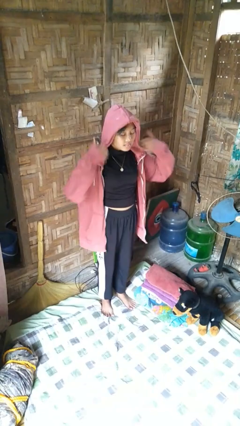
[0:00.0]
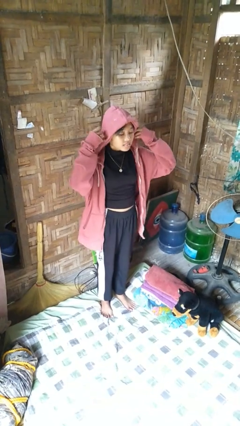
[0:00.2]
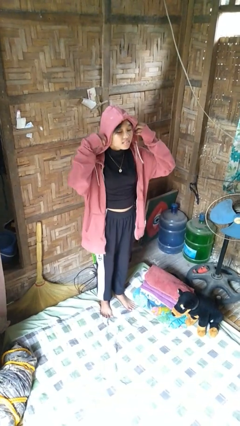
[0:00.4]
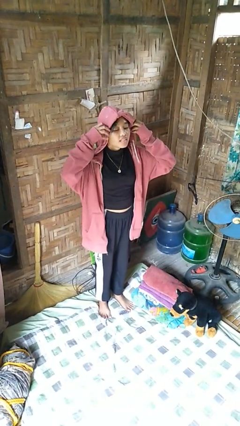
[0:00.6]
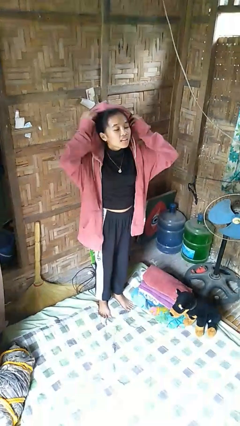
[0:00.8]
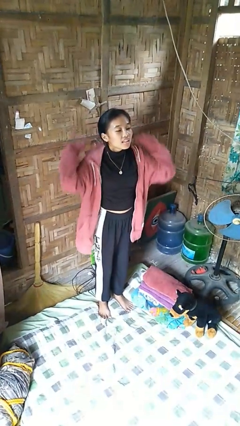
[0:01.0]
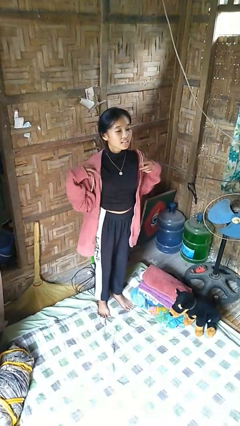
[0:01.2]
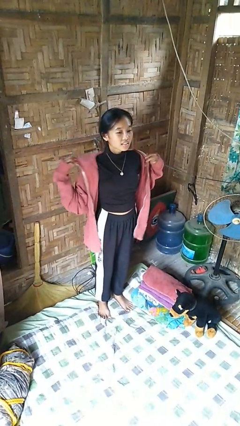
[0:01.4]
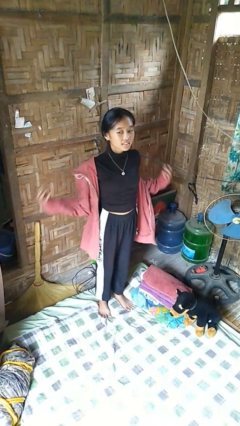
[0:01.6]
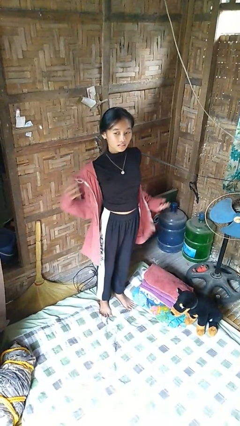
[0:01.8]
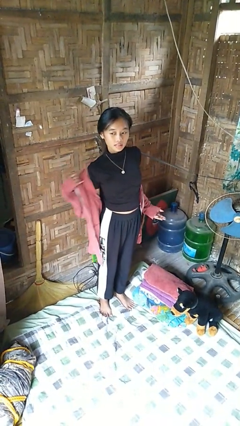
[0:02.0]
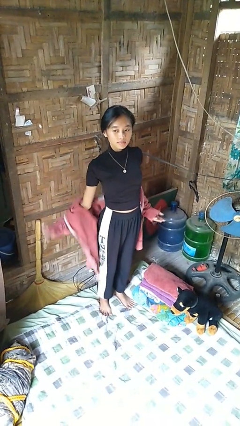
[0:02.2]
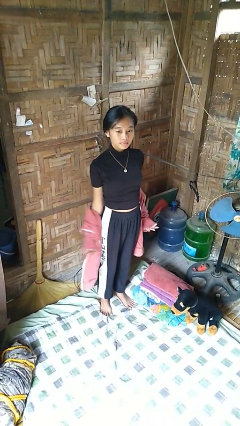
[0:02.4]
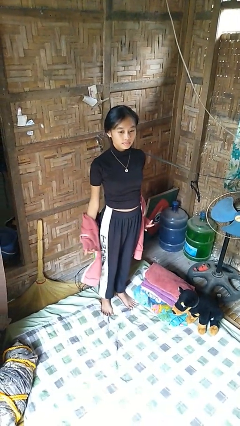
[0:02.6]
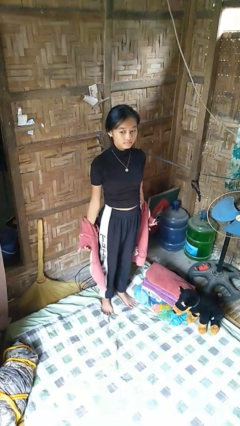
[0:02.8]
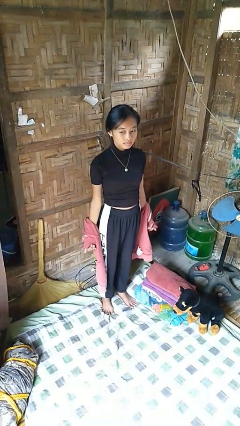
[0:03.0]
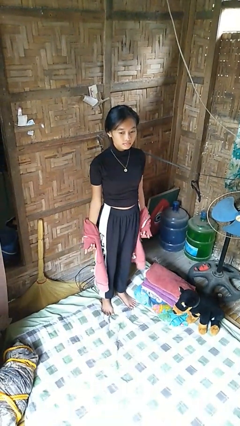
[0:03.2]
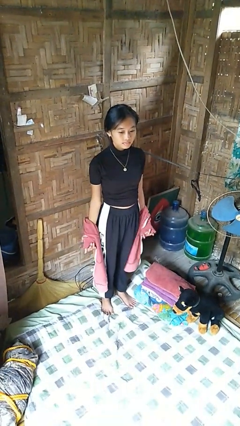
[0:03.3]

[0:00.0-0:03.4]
person takes off hoodie

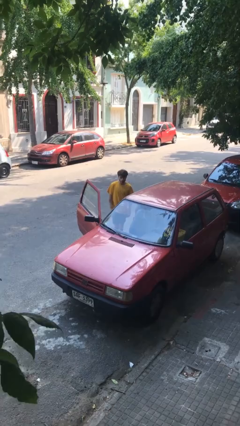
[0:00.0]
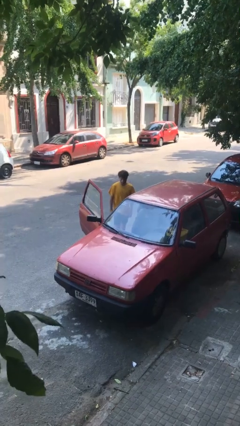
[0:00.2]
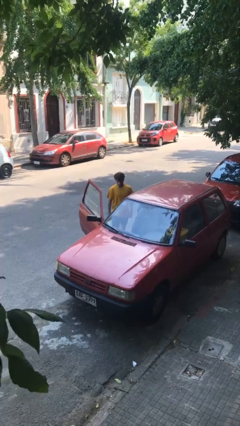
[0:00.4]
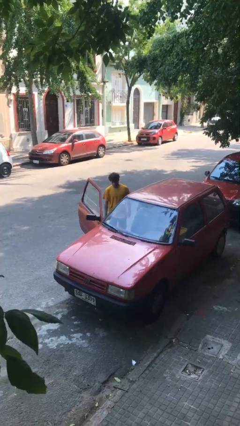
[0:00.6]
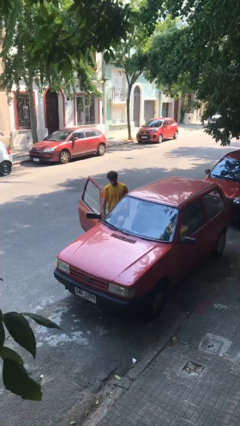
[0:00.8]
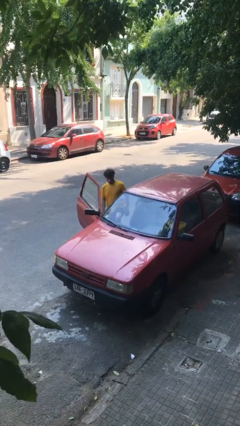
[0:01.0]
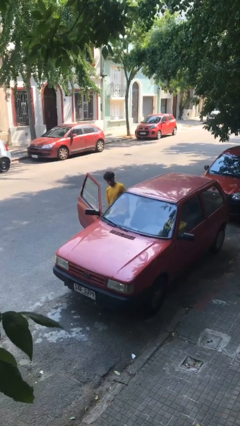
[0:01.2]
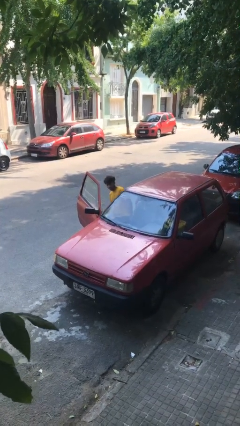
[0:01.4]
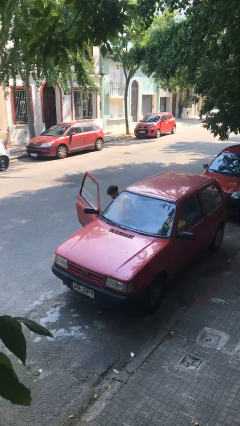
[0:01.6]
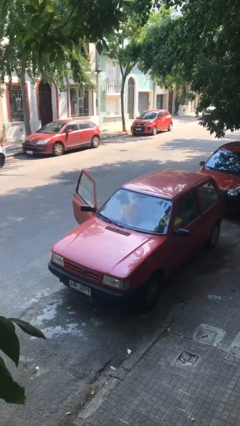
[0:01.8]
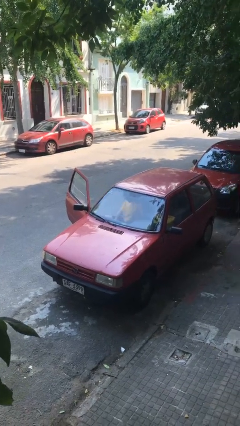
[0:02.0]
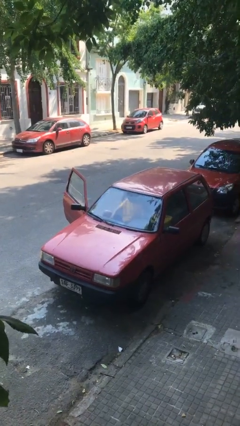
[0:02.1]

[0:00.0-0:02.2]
person enters car

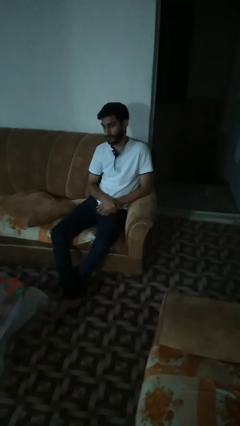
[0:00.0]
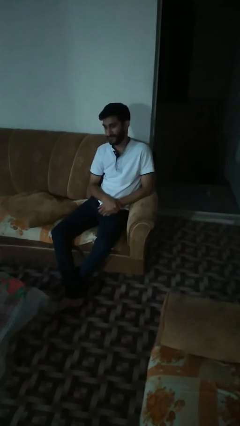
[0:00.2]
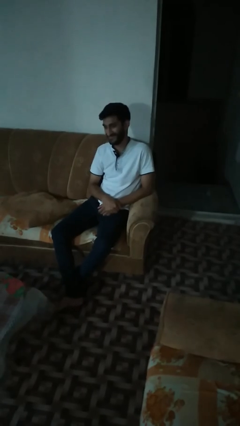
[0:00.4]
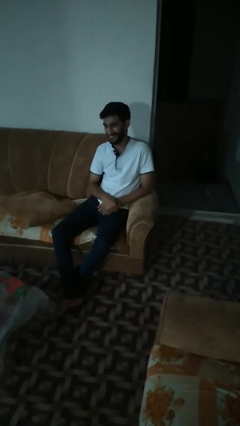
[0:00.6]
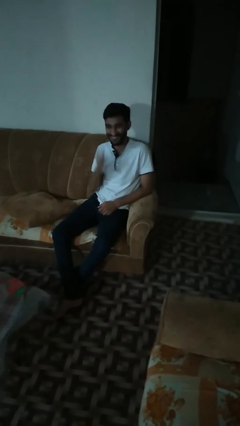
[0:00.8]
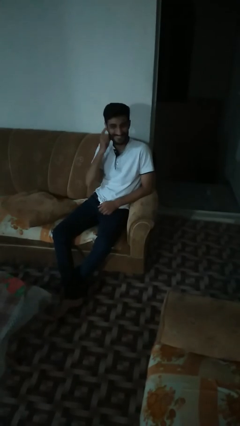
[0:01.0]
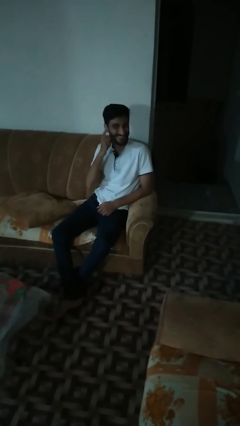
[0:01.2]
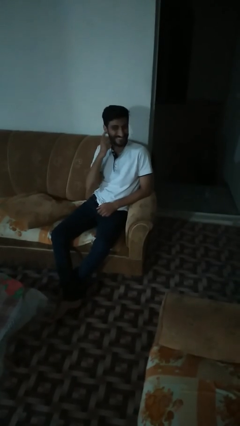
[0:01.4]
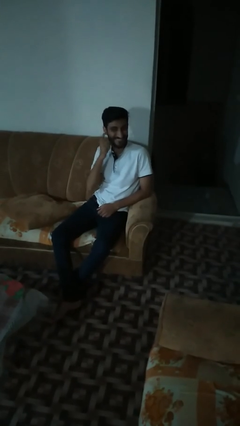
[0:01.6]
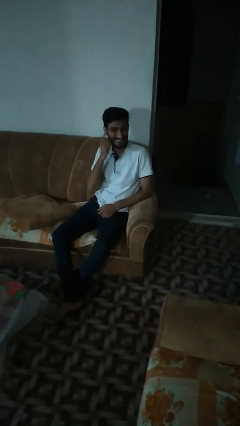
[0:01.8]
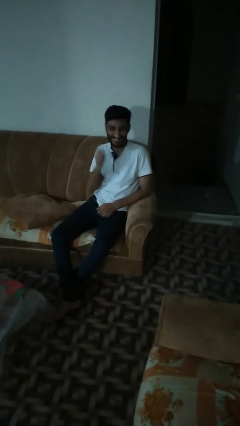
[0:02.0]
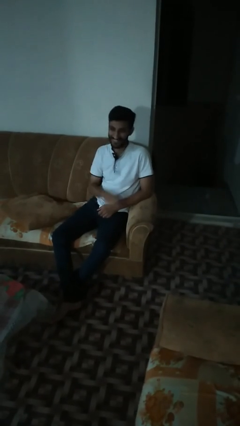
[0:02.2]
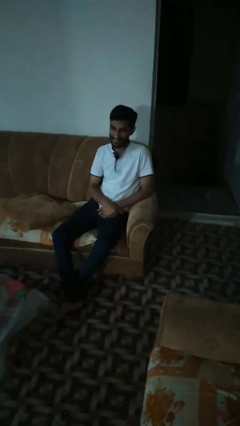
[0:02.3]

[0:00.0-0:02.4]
person gestures listen closely

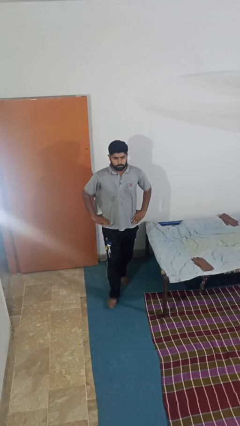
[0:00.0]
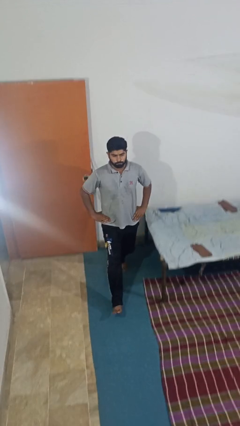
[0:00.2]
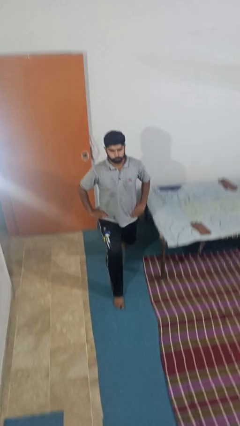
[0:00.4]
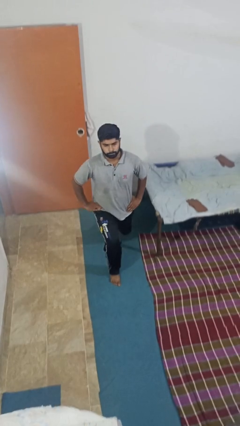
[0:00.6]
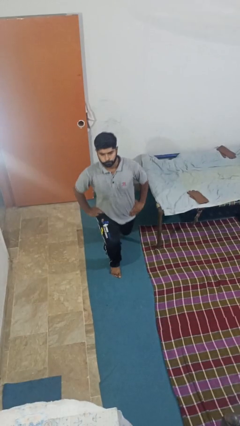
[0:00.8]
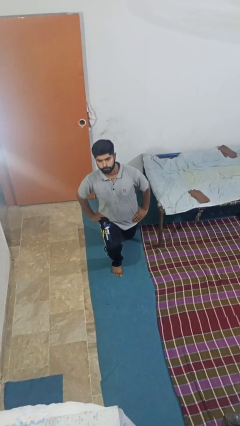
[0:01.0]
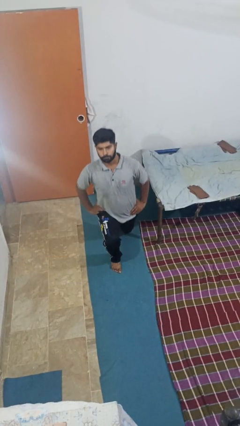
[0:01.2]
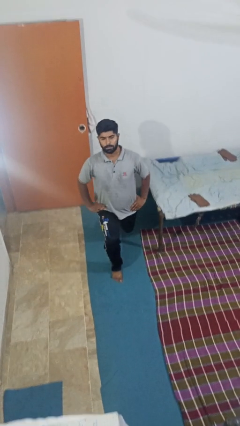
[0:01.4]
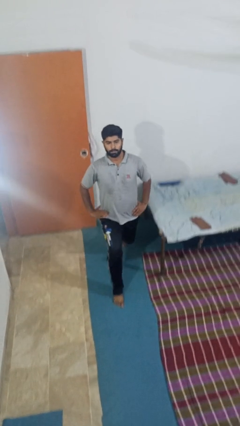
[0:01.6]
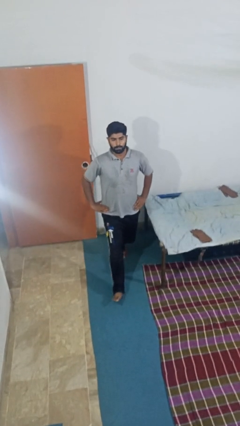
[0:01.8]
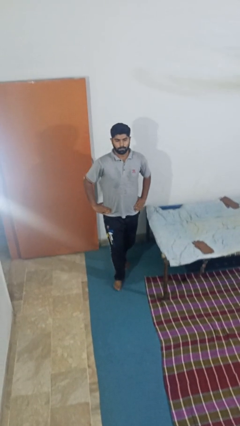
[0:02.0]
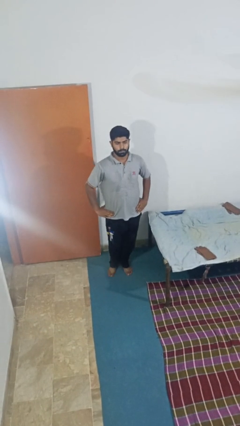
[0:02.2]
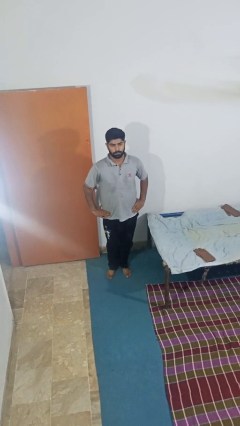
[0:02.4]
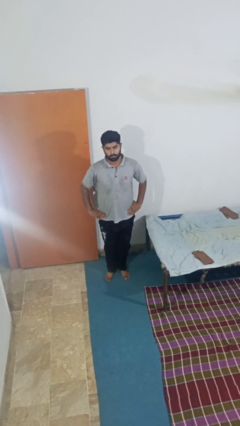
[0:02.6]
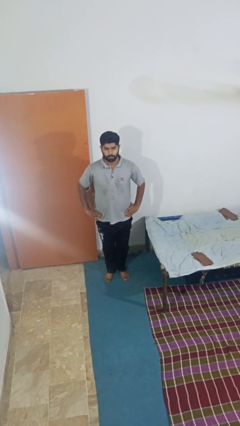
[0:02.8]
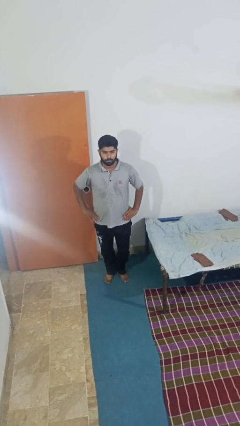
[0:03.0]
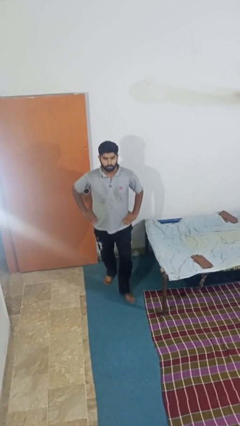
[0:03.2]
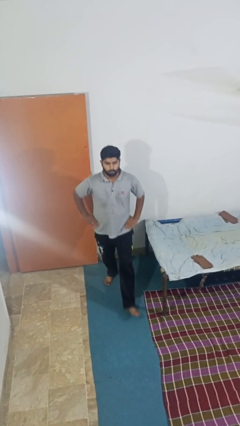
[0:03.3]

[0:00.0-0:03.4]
person exercises with lunges

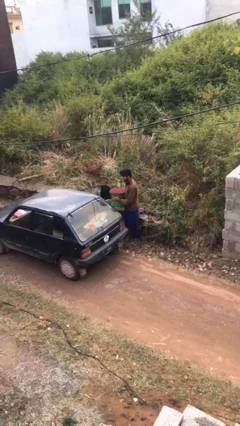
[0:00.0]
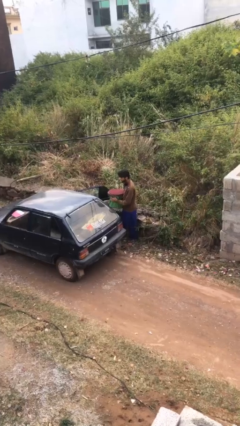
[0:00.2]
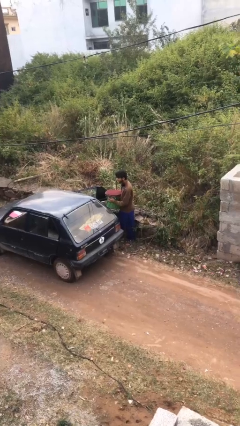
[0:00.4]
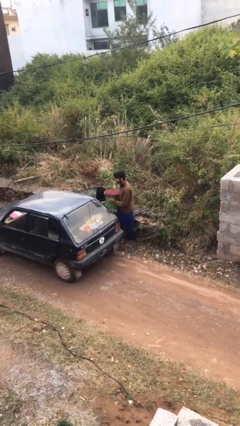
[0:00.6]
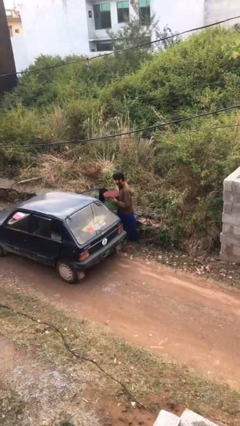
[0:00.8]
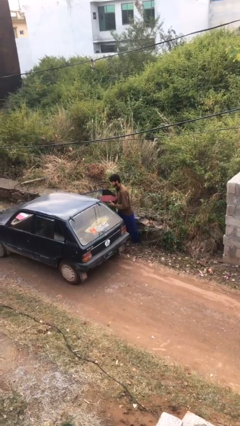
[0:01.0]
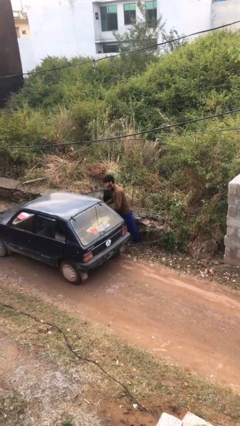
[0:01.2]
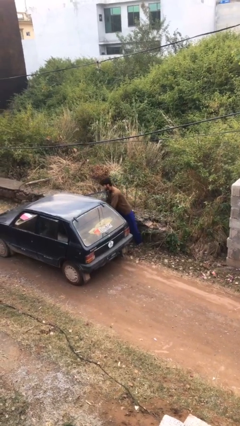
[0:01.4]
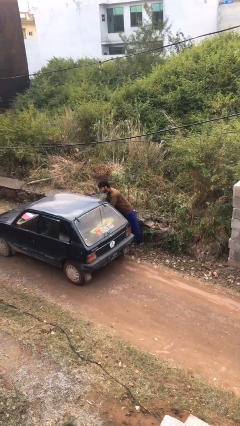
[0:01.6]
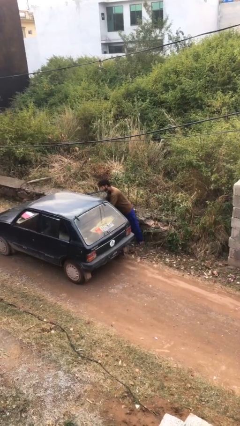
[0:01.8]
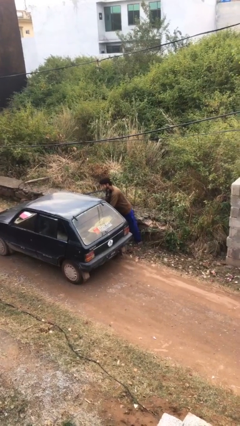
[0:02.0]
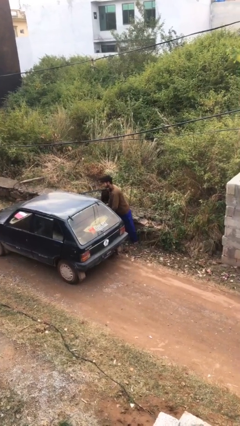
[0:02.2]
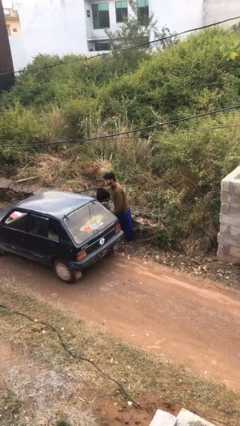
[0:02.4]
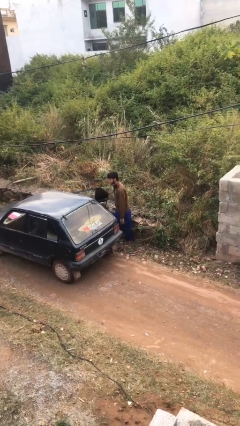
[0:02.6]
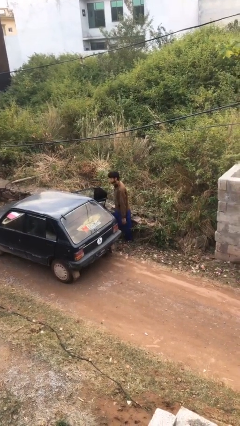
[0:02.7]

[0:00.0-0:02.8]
person loads car

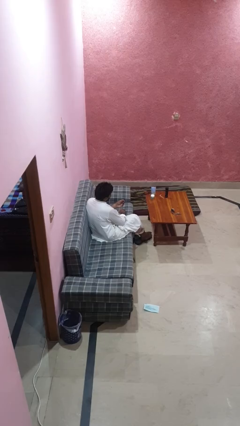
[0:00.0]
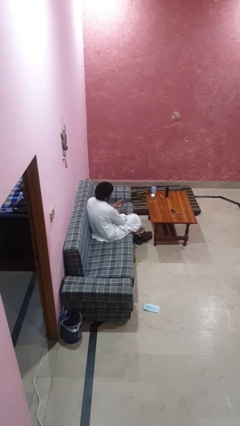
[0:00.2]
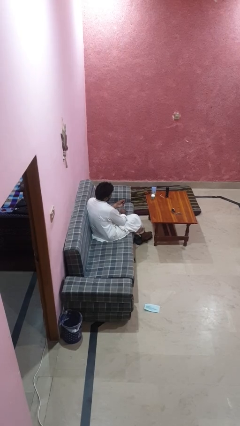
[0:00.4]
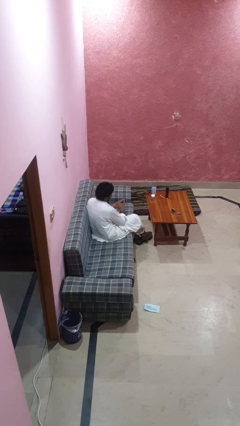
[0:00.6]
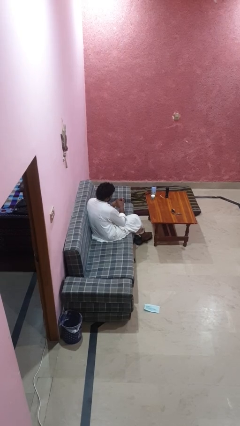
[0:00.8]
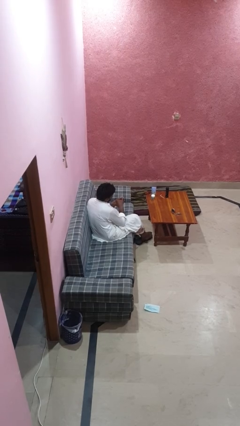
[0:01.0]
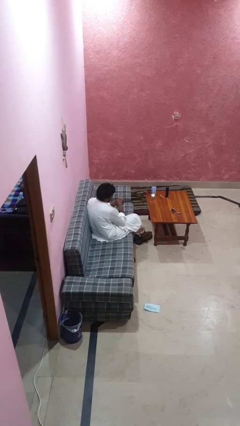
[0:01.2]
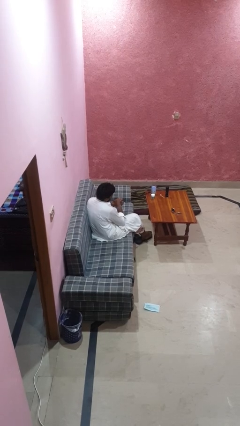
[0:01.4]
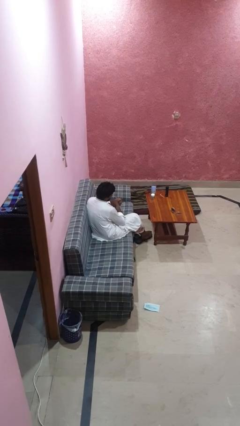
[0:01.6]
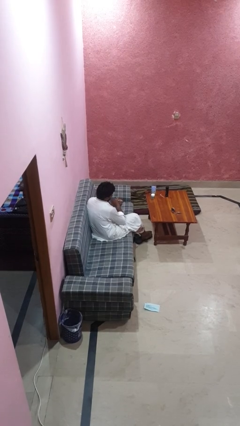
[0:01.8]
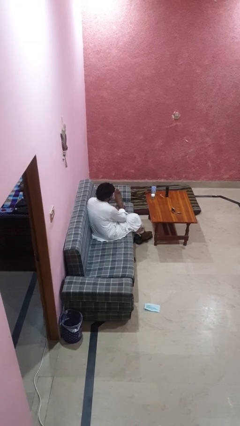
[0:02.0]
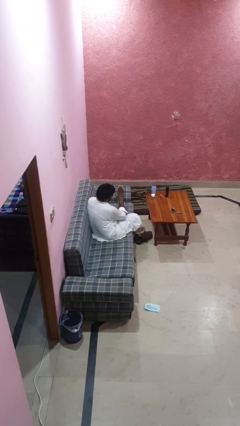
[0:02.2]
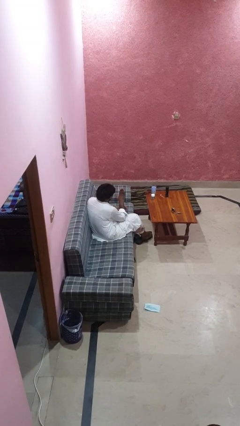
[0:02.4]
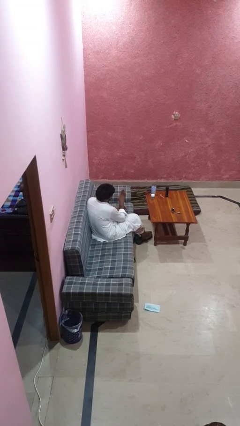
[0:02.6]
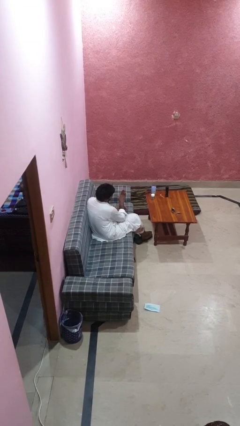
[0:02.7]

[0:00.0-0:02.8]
person puts on ring

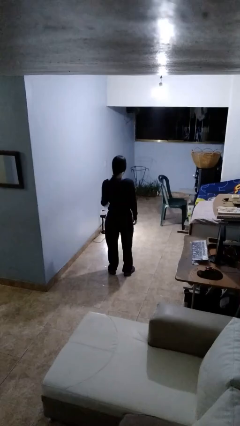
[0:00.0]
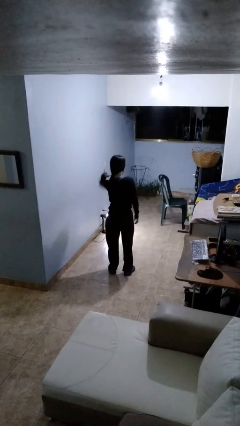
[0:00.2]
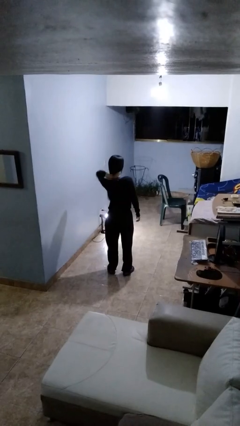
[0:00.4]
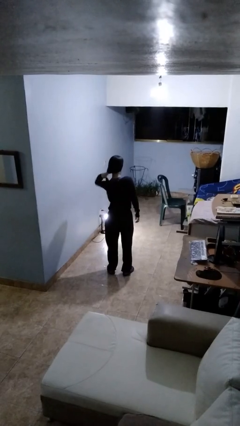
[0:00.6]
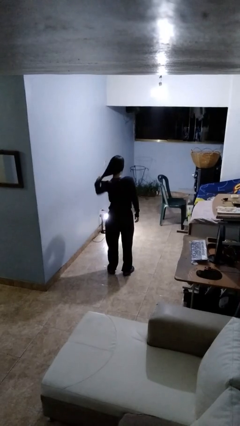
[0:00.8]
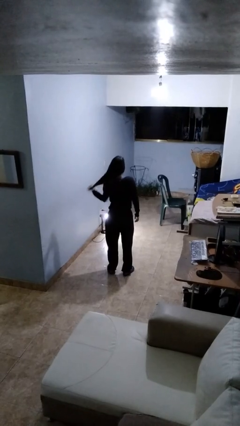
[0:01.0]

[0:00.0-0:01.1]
person takes off hairtie
